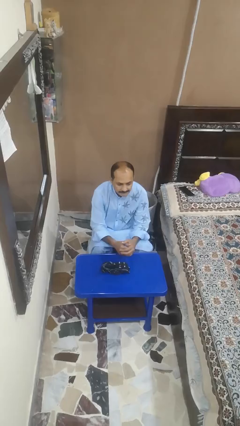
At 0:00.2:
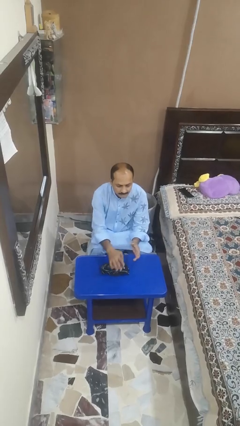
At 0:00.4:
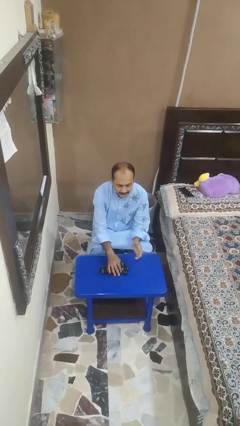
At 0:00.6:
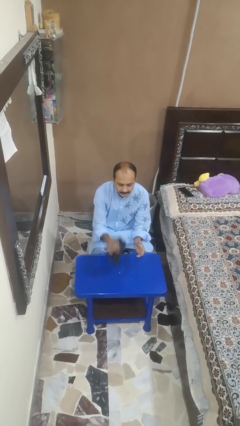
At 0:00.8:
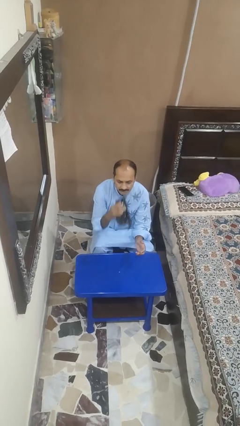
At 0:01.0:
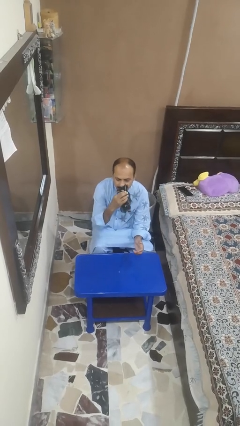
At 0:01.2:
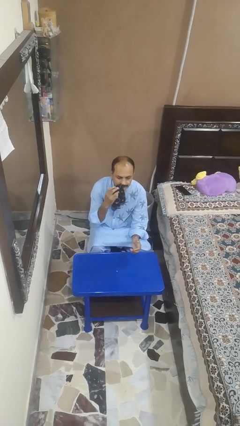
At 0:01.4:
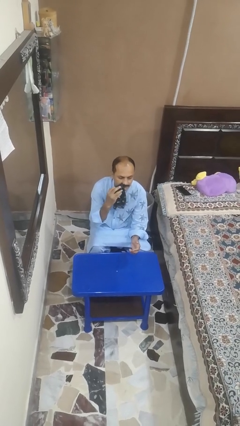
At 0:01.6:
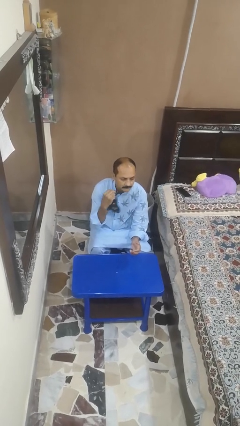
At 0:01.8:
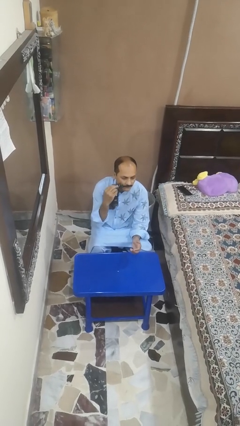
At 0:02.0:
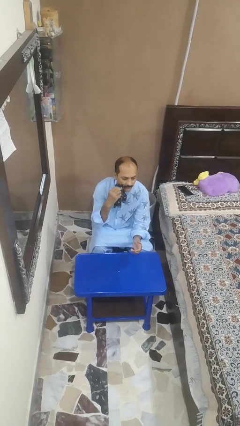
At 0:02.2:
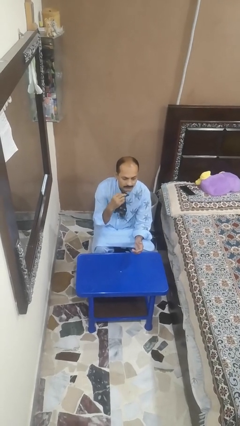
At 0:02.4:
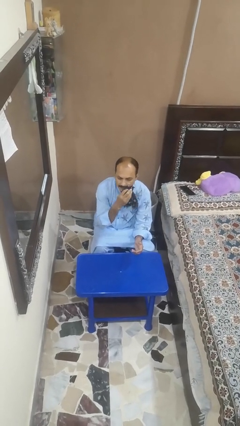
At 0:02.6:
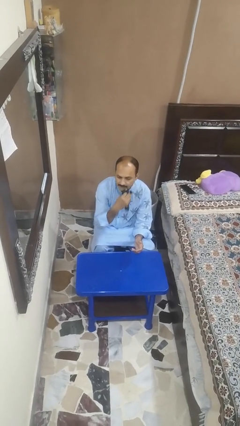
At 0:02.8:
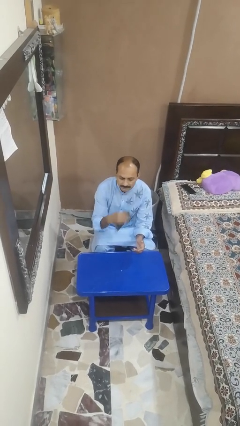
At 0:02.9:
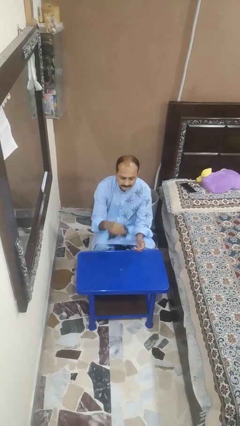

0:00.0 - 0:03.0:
person wipes mouth with napkin

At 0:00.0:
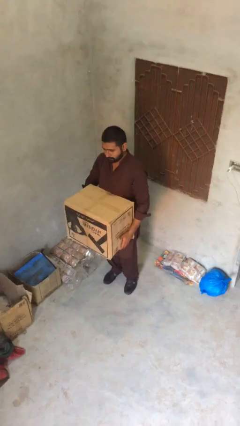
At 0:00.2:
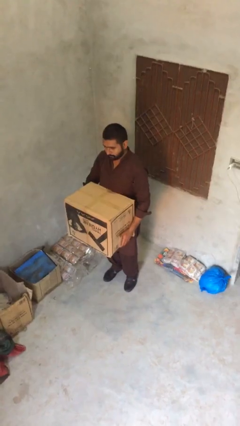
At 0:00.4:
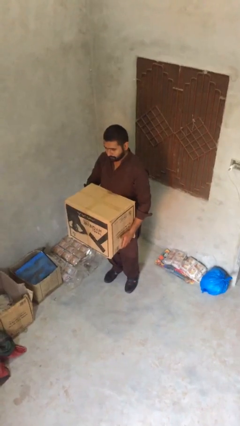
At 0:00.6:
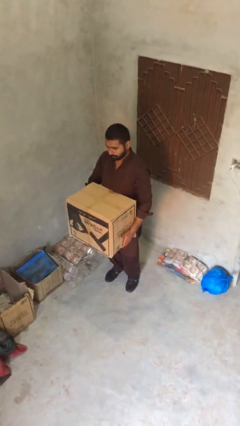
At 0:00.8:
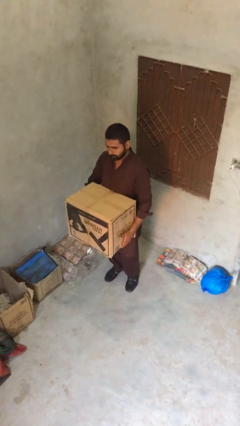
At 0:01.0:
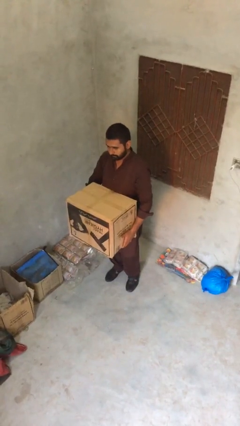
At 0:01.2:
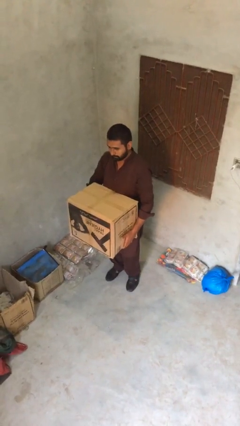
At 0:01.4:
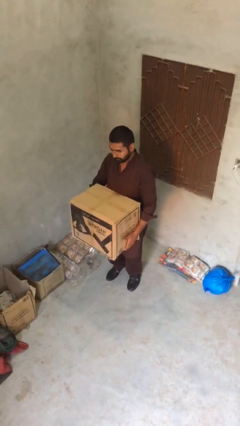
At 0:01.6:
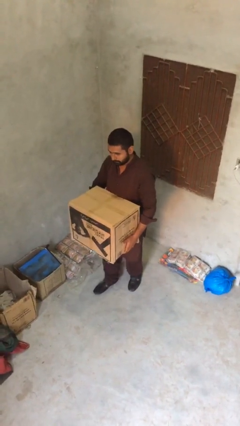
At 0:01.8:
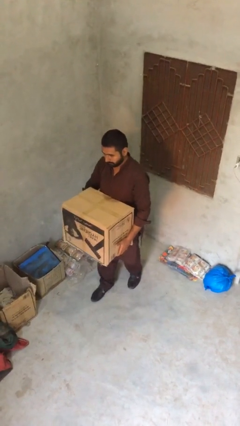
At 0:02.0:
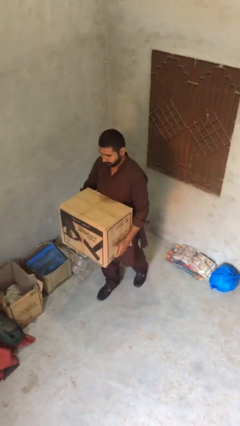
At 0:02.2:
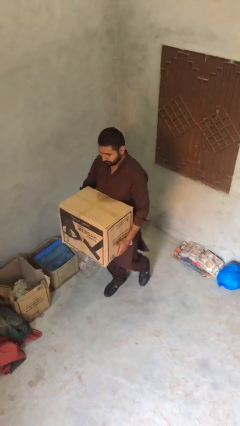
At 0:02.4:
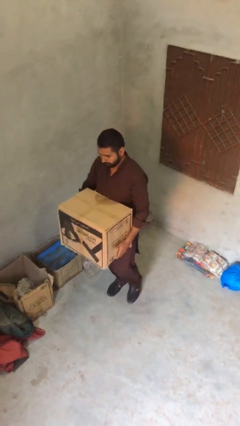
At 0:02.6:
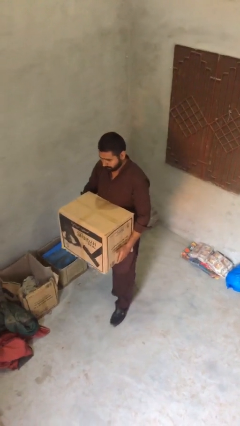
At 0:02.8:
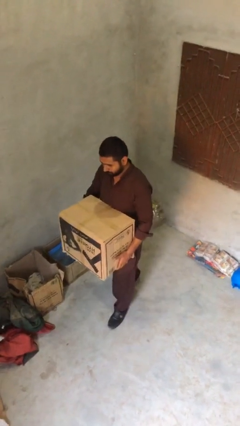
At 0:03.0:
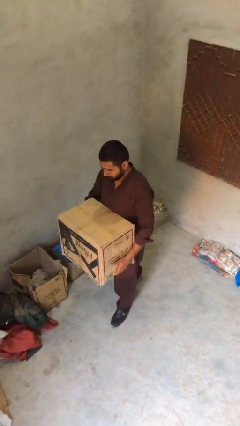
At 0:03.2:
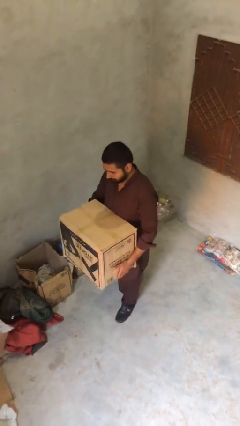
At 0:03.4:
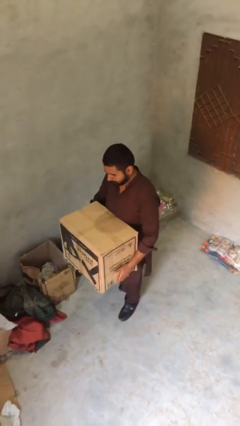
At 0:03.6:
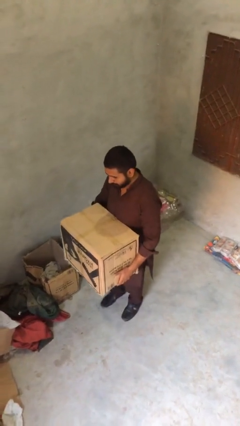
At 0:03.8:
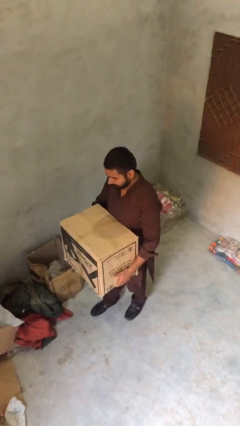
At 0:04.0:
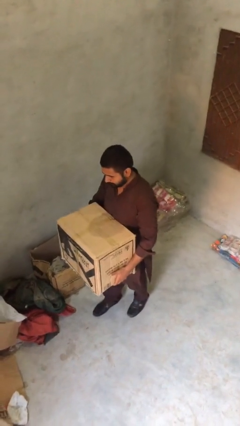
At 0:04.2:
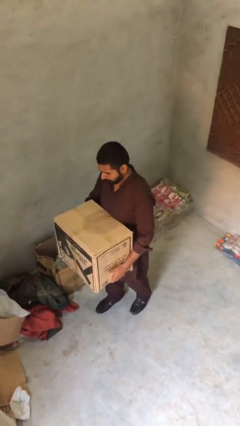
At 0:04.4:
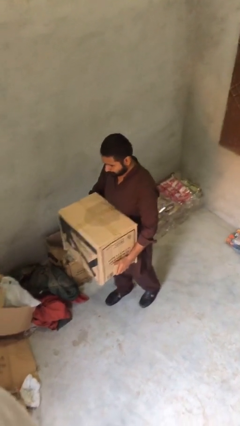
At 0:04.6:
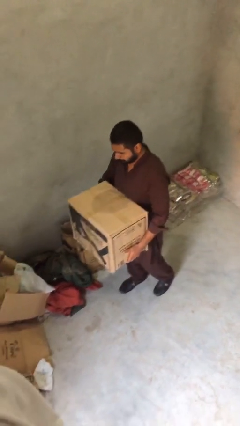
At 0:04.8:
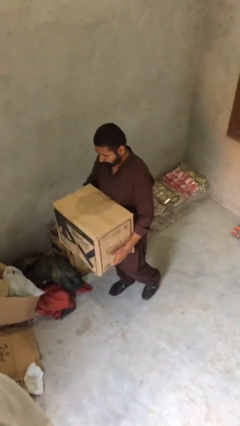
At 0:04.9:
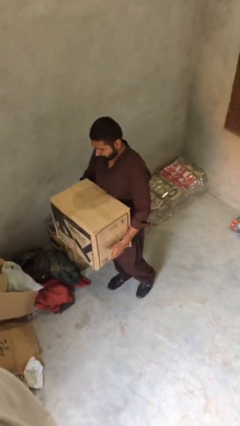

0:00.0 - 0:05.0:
person carries heavy object

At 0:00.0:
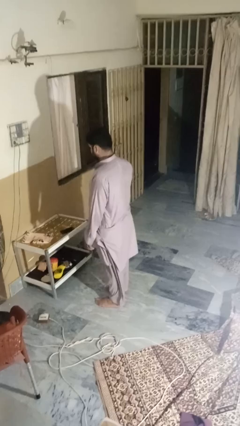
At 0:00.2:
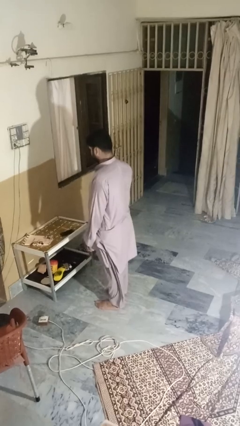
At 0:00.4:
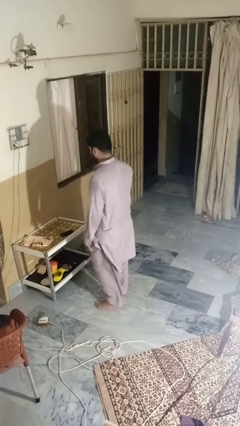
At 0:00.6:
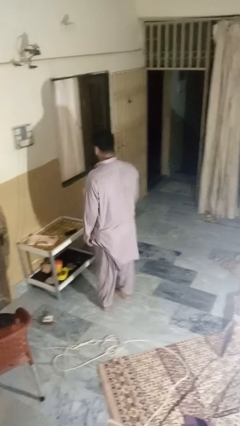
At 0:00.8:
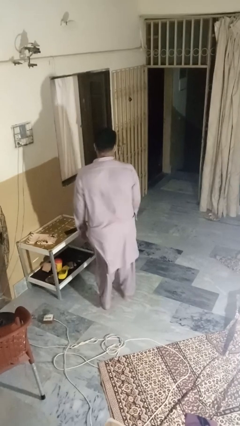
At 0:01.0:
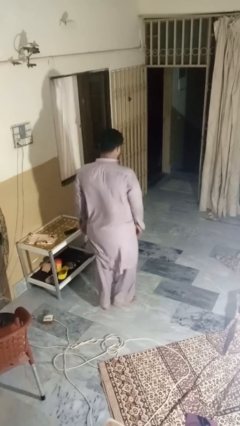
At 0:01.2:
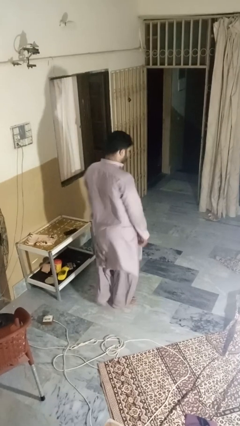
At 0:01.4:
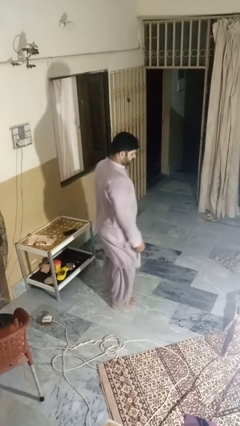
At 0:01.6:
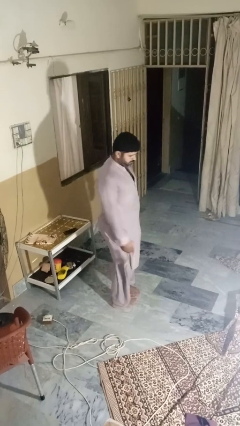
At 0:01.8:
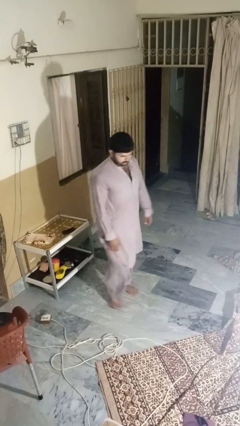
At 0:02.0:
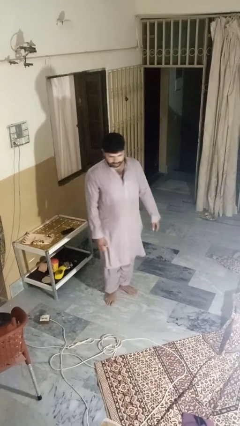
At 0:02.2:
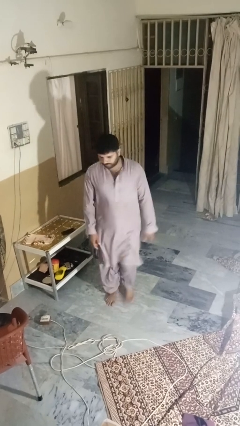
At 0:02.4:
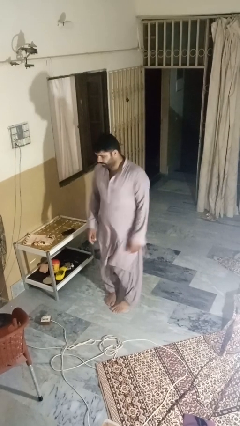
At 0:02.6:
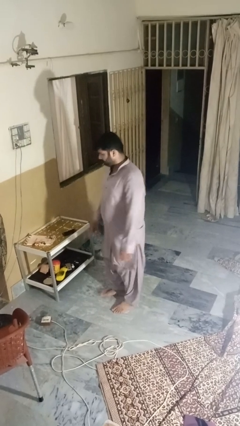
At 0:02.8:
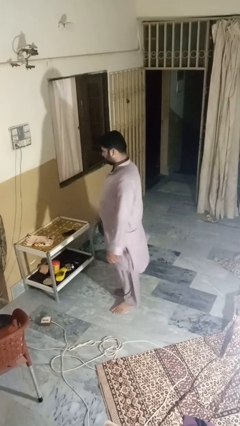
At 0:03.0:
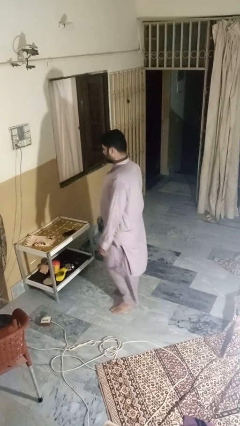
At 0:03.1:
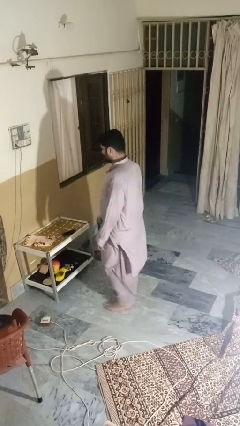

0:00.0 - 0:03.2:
person twirls

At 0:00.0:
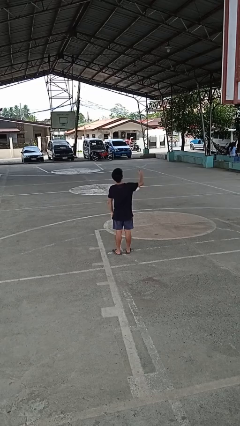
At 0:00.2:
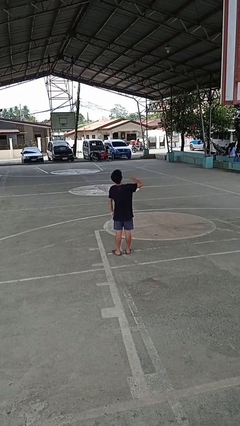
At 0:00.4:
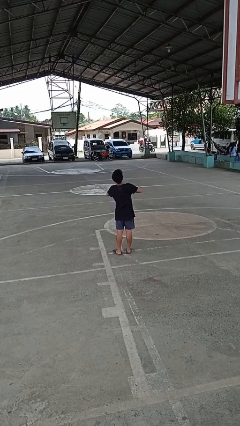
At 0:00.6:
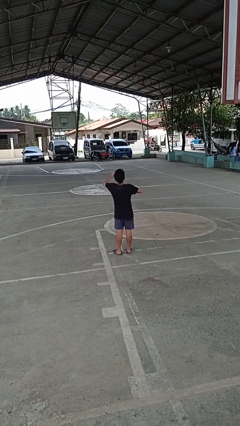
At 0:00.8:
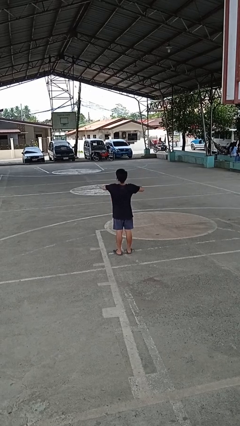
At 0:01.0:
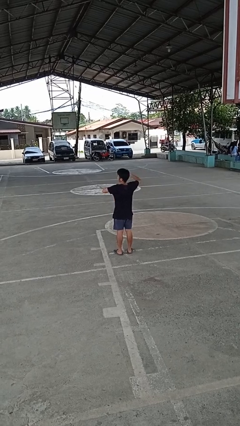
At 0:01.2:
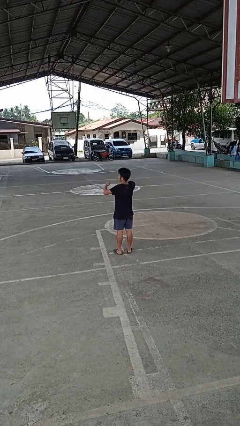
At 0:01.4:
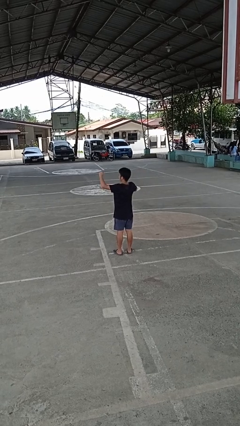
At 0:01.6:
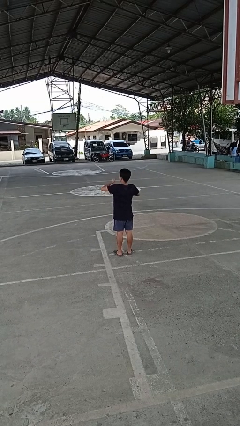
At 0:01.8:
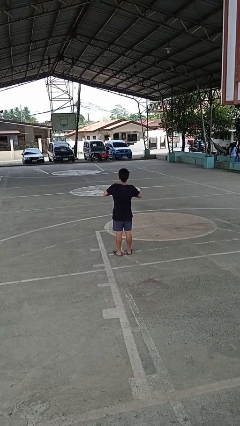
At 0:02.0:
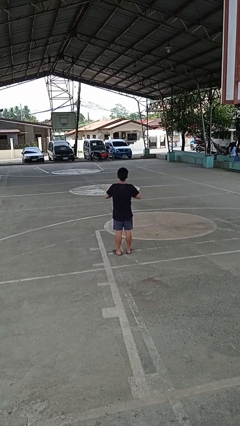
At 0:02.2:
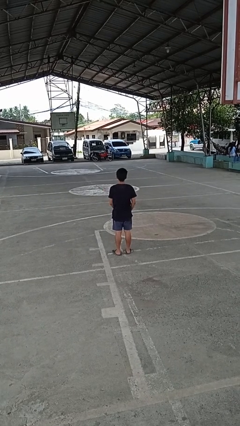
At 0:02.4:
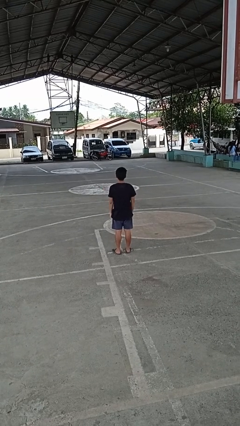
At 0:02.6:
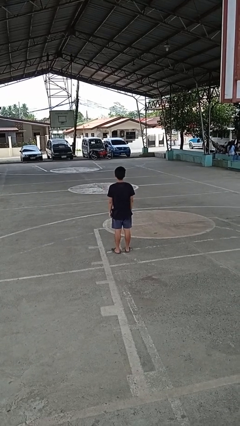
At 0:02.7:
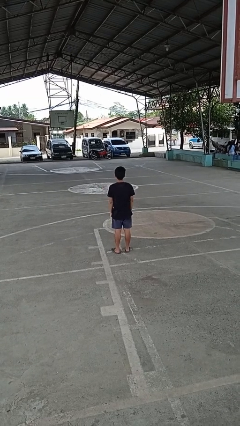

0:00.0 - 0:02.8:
person drums on chest

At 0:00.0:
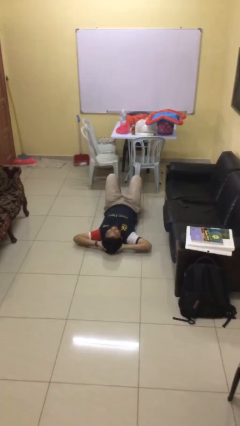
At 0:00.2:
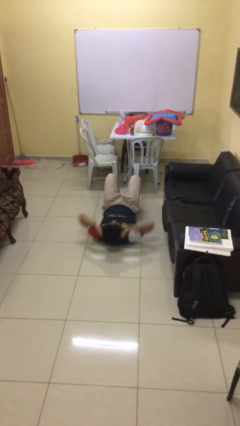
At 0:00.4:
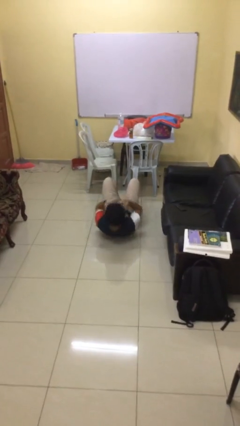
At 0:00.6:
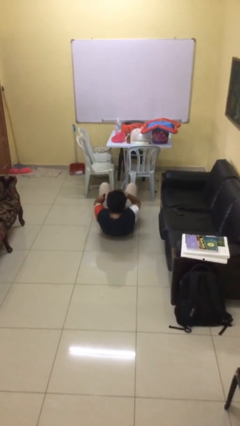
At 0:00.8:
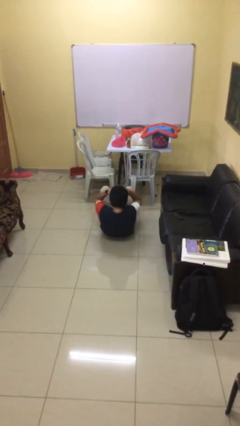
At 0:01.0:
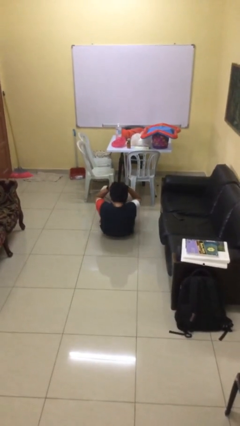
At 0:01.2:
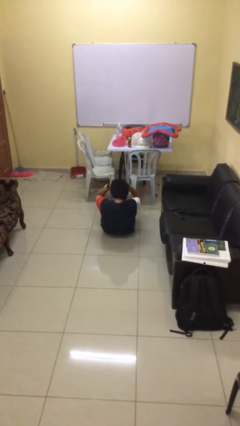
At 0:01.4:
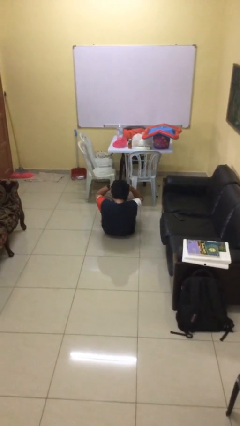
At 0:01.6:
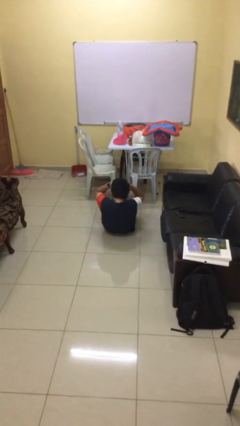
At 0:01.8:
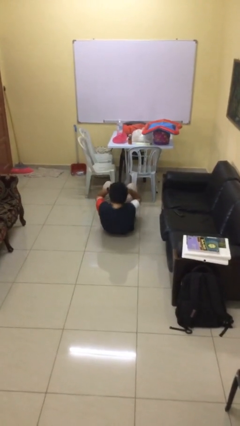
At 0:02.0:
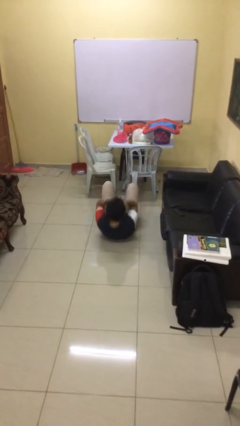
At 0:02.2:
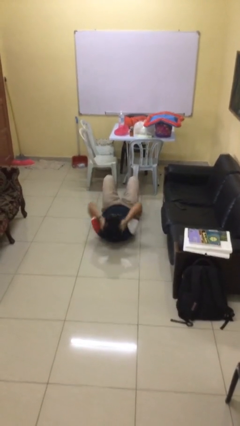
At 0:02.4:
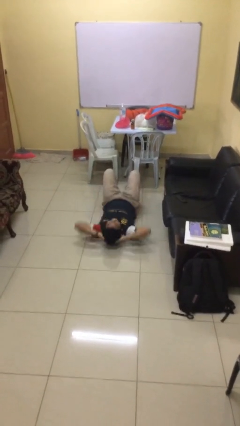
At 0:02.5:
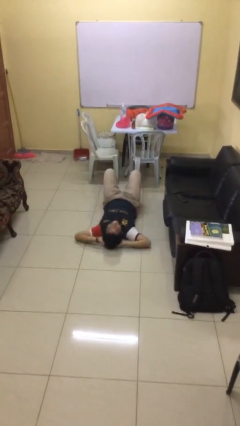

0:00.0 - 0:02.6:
person exercises with situp

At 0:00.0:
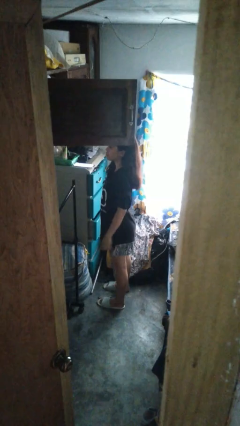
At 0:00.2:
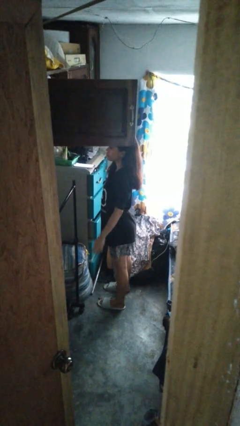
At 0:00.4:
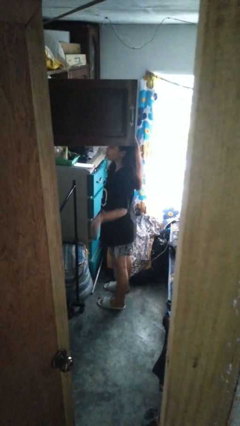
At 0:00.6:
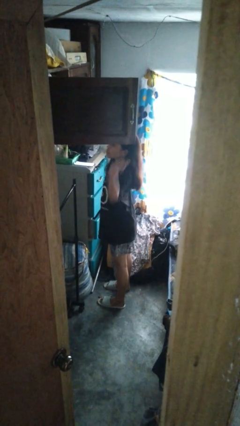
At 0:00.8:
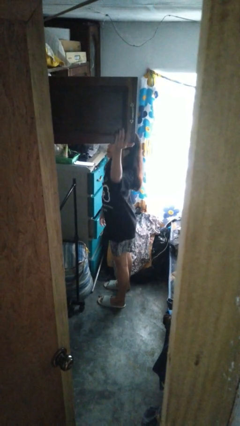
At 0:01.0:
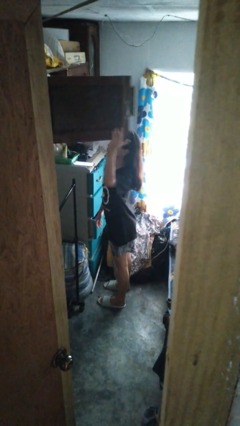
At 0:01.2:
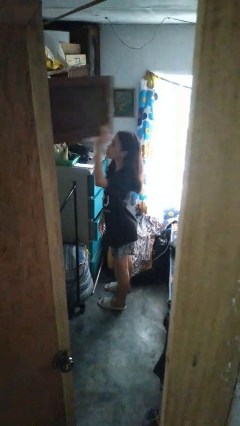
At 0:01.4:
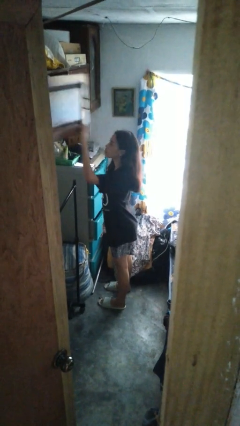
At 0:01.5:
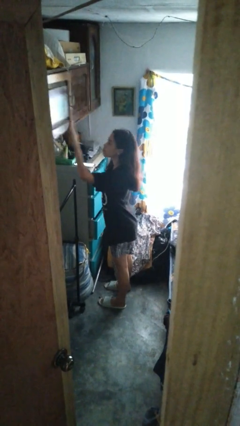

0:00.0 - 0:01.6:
person closes closet door
